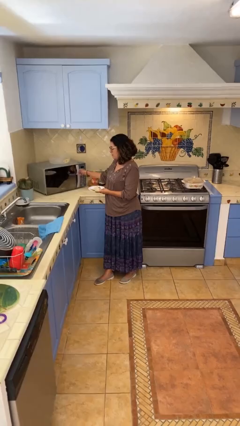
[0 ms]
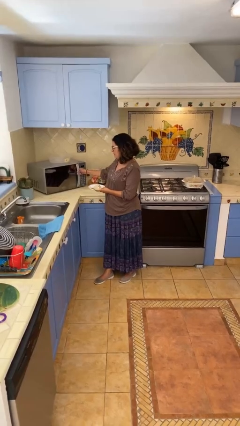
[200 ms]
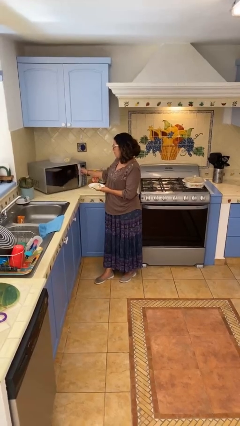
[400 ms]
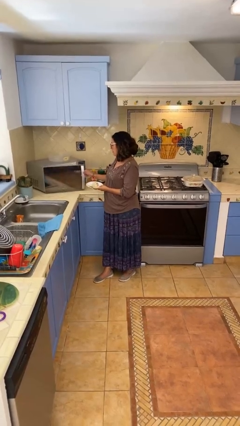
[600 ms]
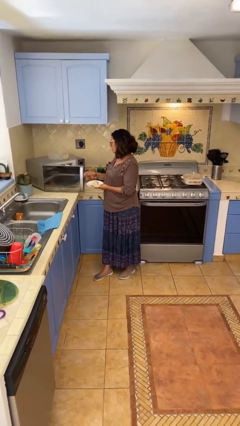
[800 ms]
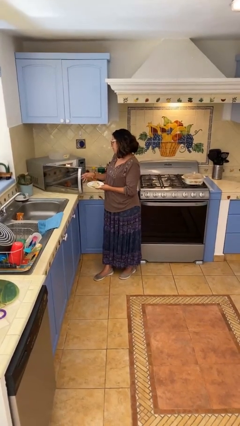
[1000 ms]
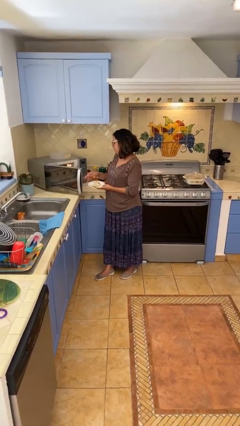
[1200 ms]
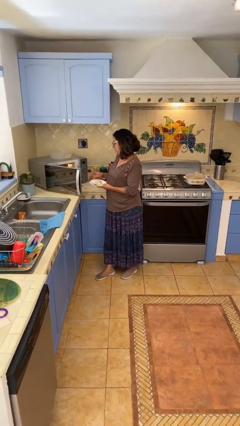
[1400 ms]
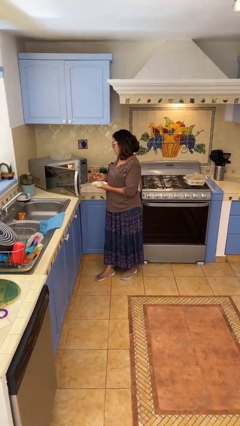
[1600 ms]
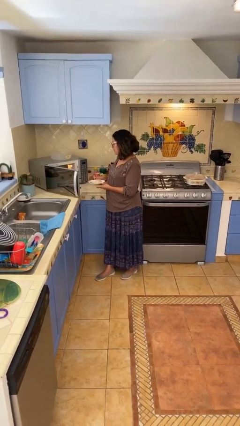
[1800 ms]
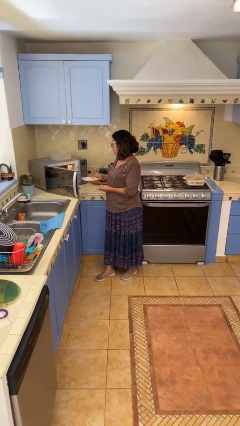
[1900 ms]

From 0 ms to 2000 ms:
person opens microwave

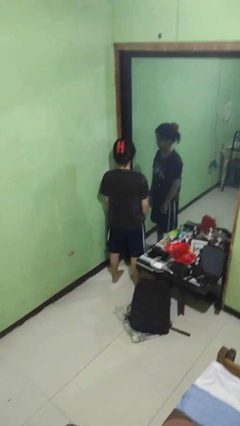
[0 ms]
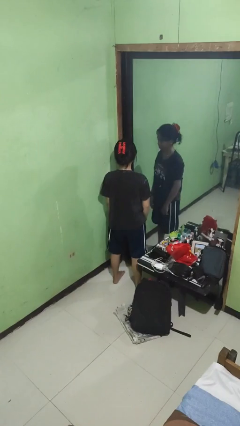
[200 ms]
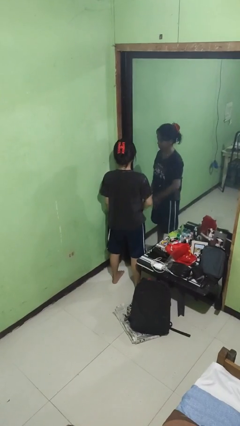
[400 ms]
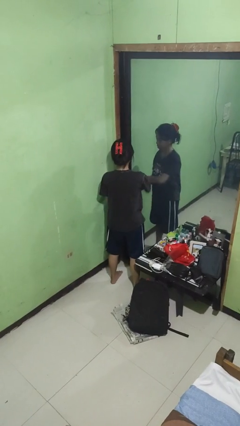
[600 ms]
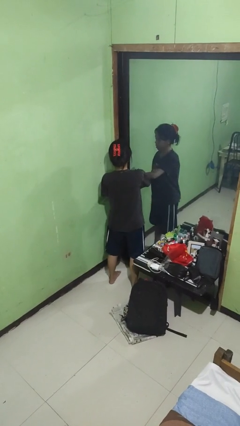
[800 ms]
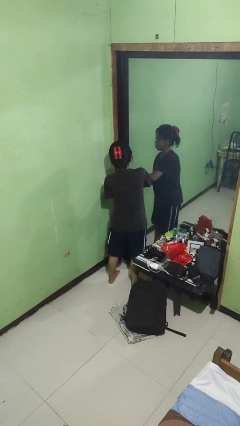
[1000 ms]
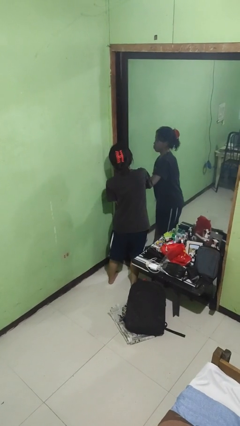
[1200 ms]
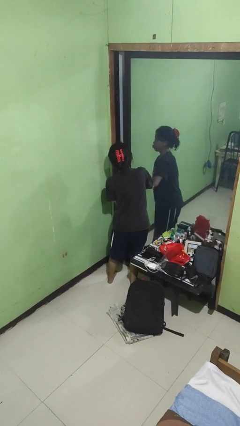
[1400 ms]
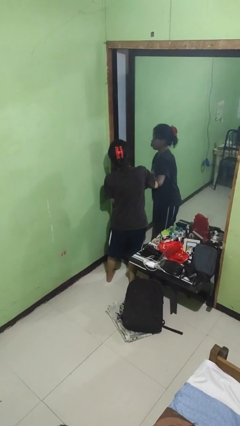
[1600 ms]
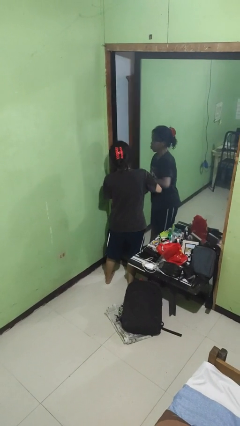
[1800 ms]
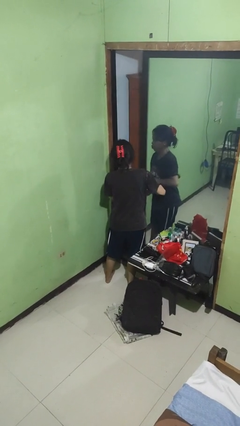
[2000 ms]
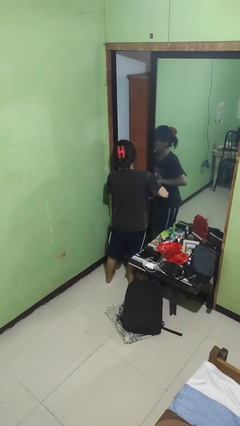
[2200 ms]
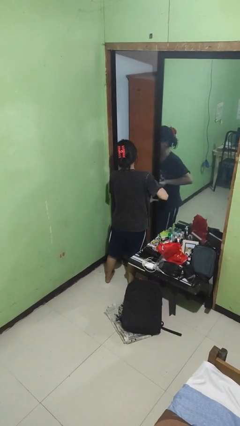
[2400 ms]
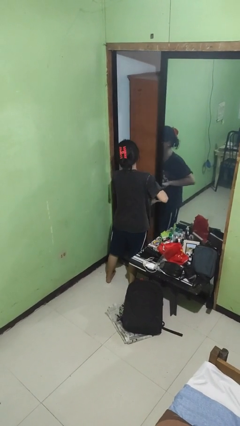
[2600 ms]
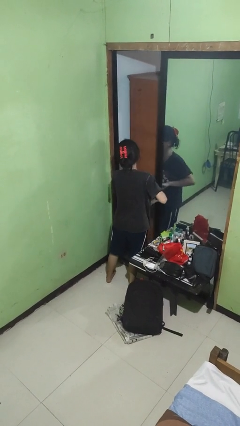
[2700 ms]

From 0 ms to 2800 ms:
person opens sliding door

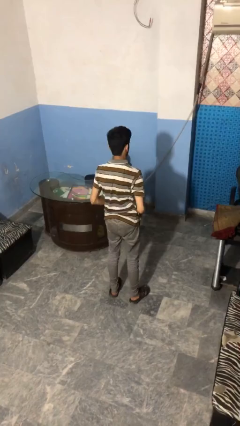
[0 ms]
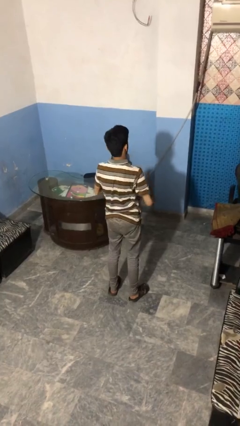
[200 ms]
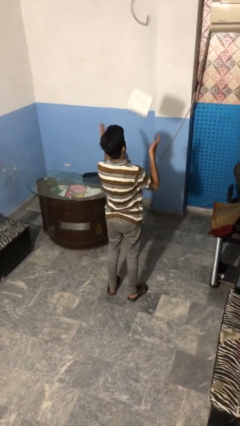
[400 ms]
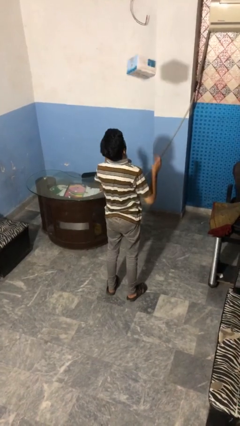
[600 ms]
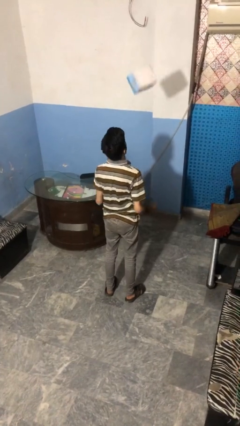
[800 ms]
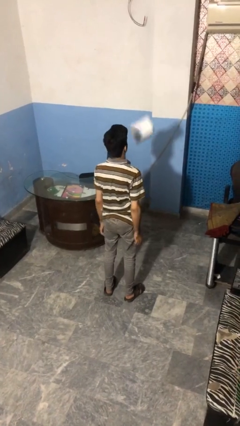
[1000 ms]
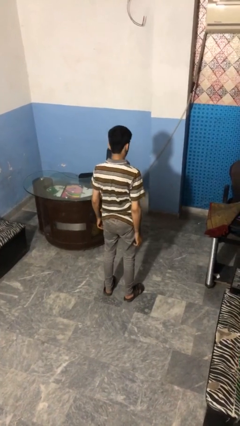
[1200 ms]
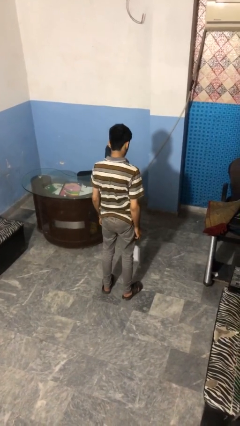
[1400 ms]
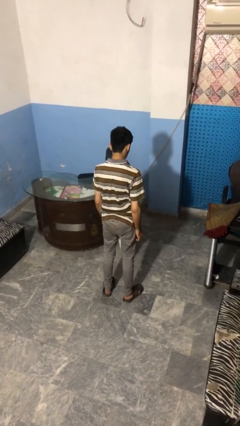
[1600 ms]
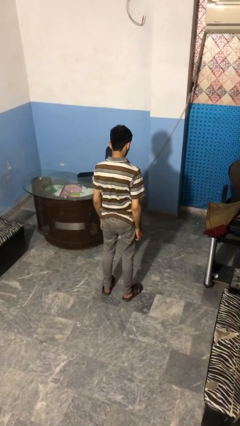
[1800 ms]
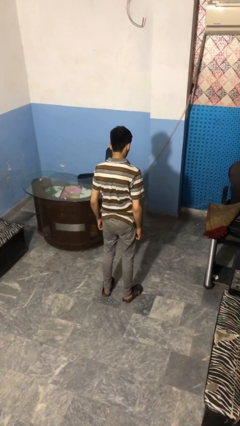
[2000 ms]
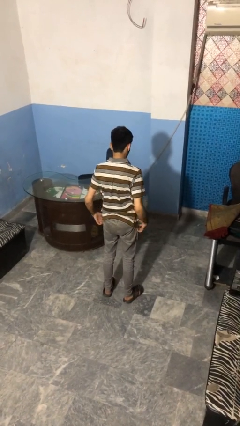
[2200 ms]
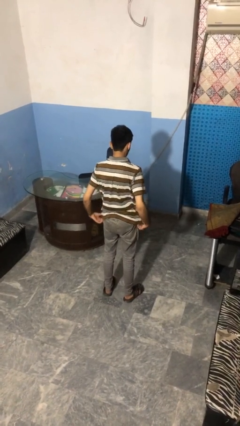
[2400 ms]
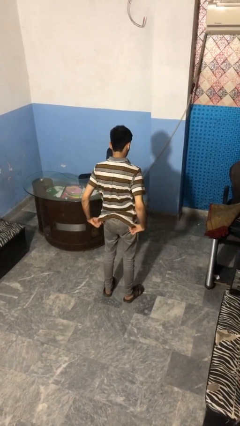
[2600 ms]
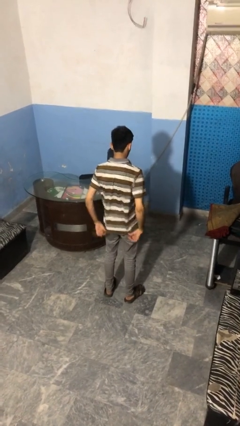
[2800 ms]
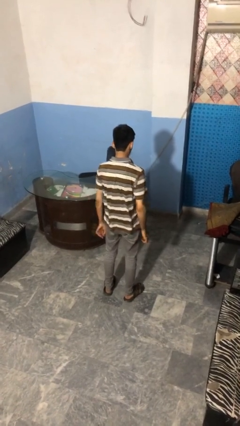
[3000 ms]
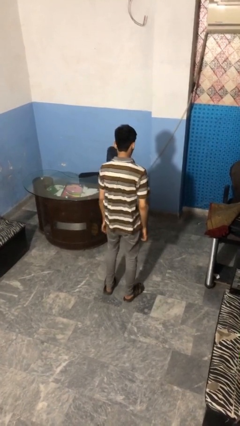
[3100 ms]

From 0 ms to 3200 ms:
person throws object into air

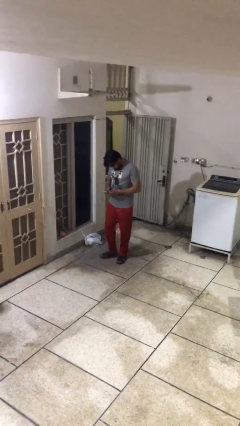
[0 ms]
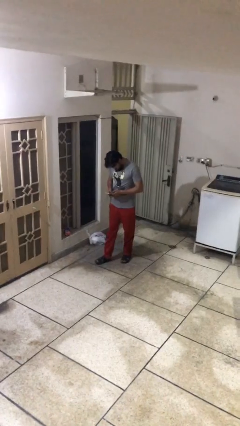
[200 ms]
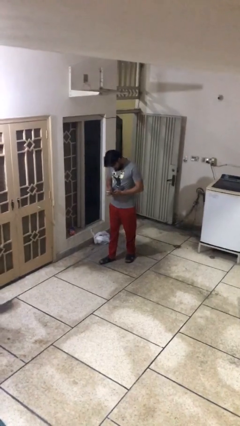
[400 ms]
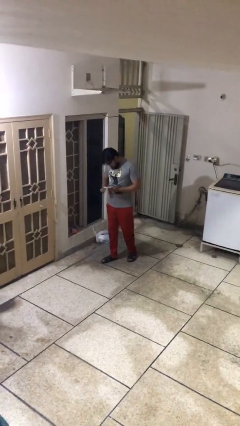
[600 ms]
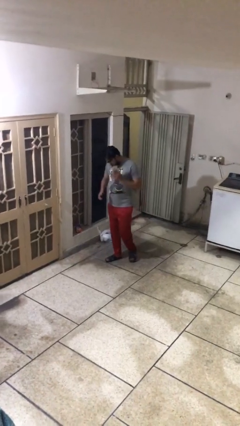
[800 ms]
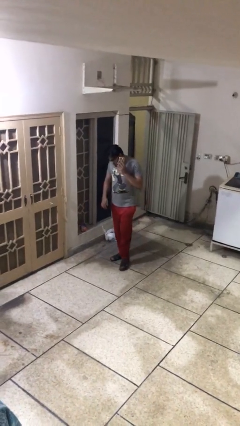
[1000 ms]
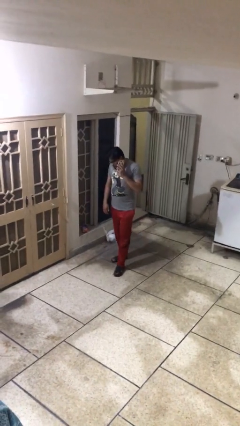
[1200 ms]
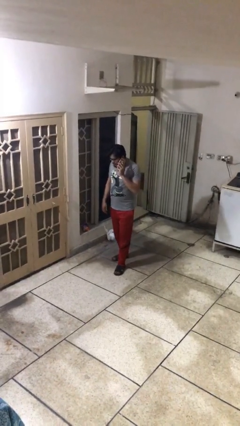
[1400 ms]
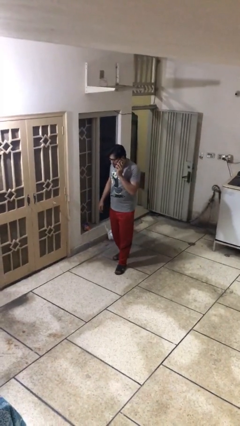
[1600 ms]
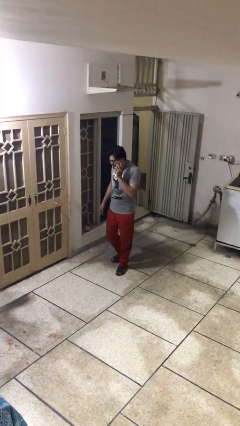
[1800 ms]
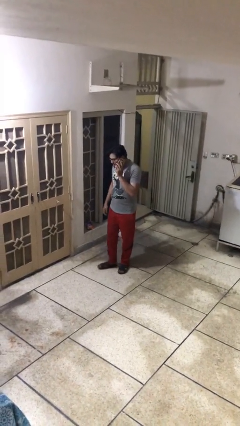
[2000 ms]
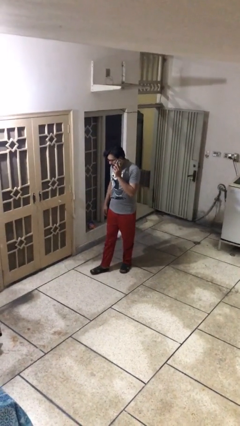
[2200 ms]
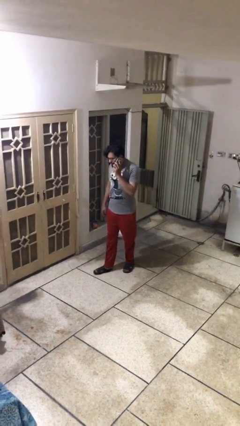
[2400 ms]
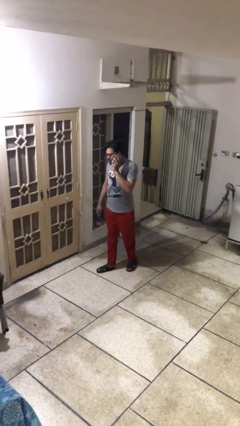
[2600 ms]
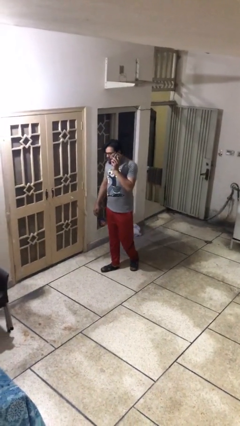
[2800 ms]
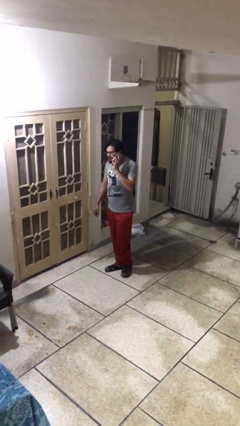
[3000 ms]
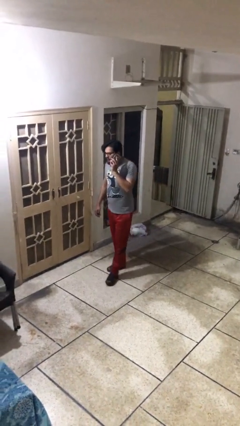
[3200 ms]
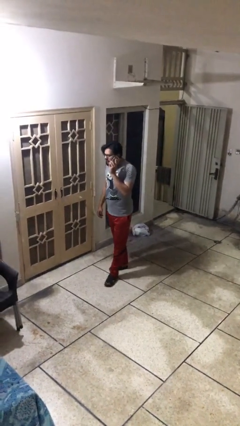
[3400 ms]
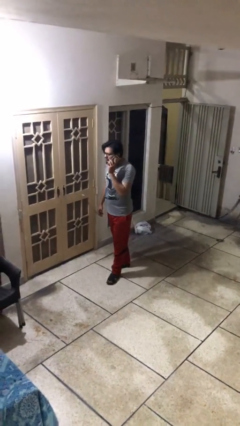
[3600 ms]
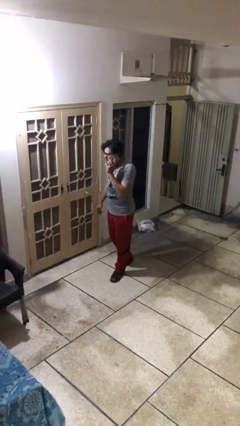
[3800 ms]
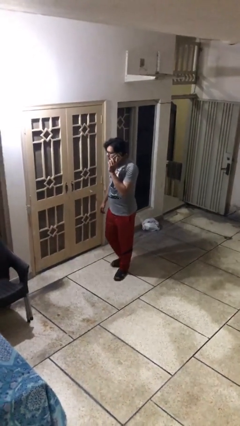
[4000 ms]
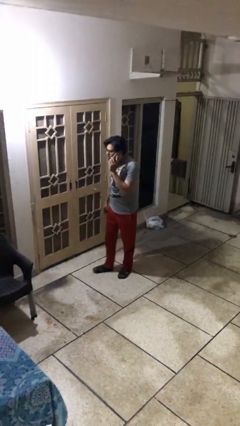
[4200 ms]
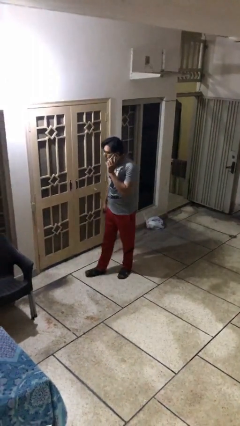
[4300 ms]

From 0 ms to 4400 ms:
person talks on phone

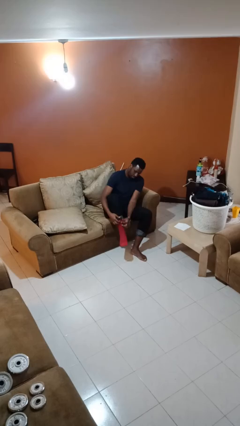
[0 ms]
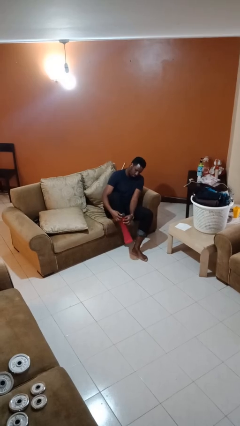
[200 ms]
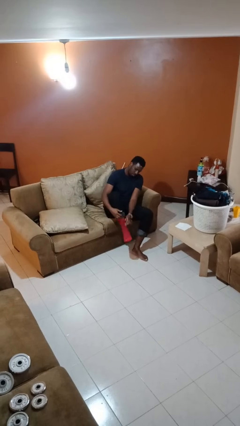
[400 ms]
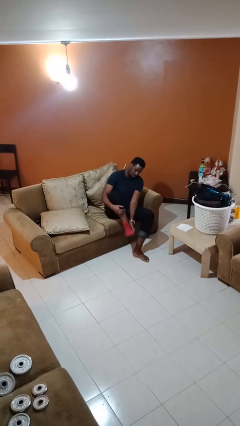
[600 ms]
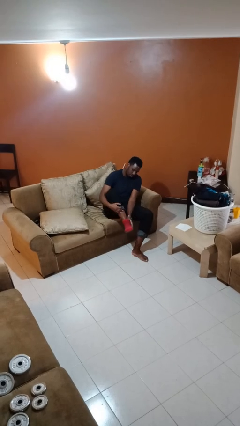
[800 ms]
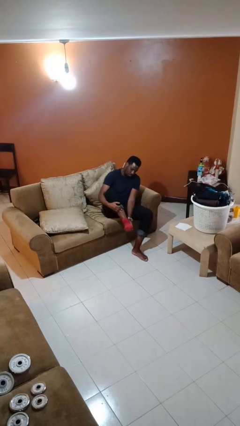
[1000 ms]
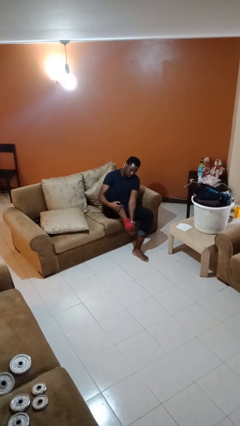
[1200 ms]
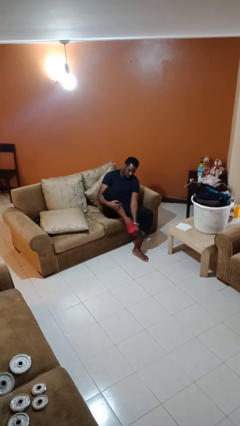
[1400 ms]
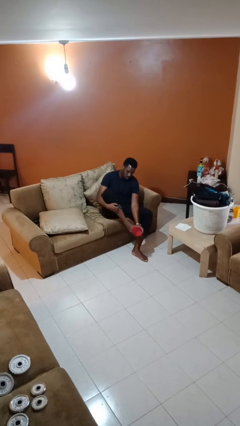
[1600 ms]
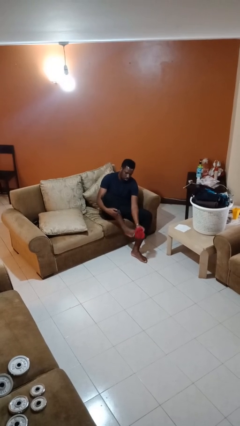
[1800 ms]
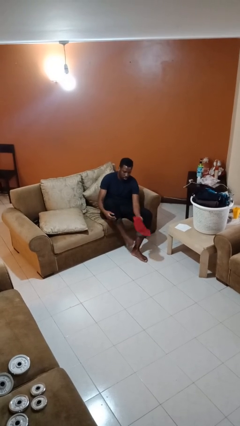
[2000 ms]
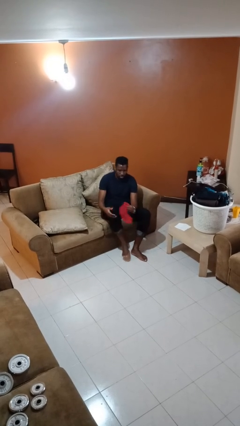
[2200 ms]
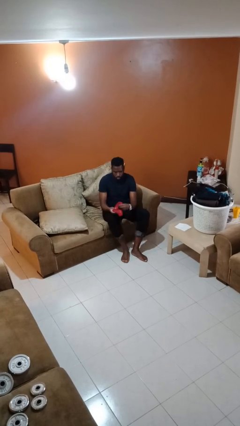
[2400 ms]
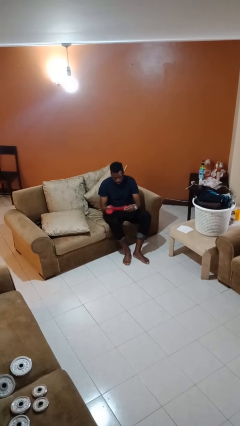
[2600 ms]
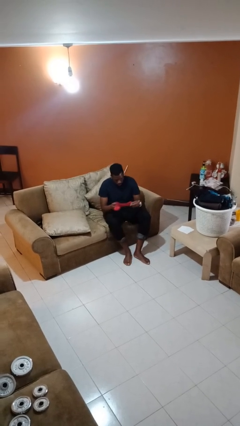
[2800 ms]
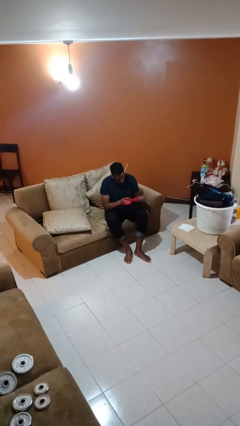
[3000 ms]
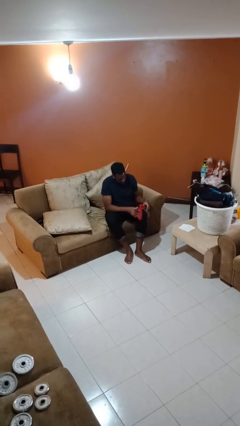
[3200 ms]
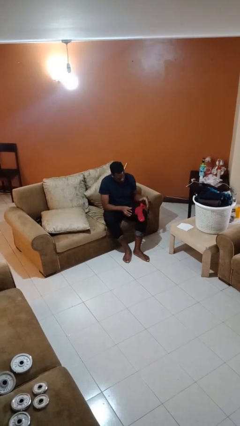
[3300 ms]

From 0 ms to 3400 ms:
person takes off socks

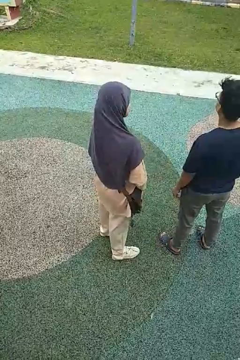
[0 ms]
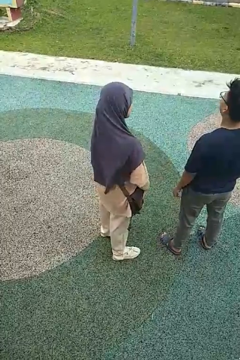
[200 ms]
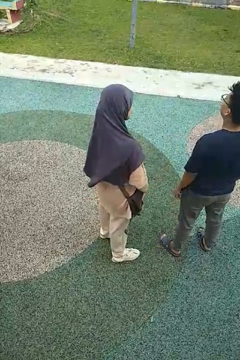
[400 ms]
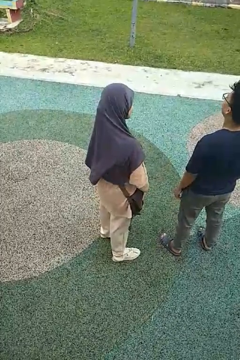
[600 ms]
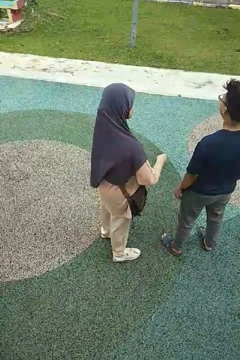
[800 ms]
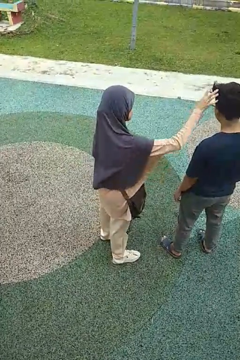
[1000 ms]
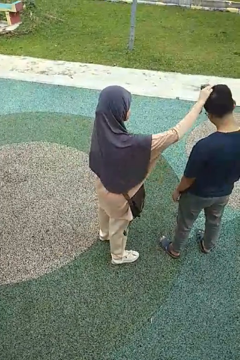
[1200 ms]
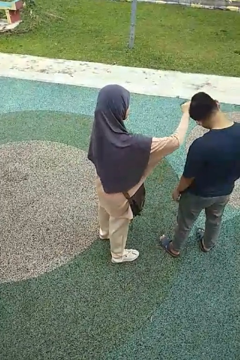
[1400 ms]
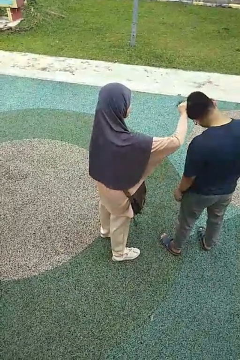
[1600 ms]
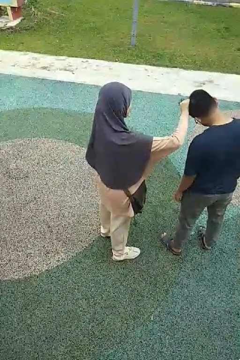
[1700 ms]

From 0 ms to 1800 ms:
person grabs person by hair

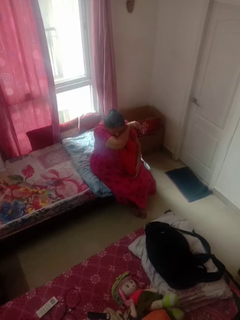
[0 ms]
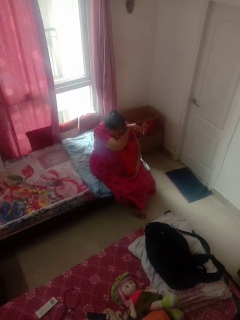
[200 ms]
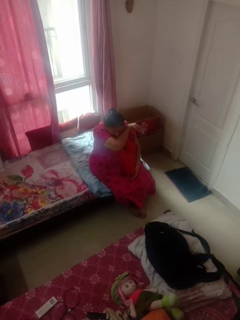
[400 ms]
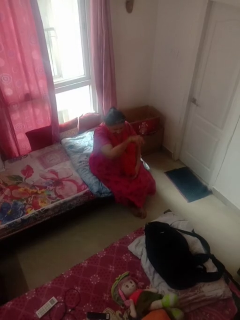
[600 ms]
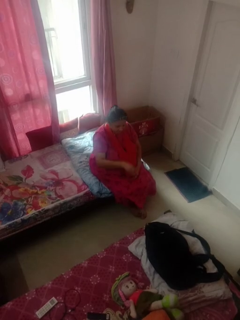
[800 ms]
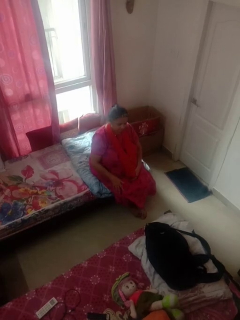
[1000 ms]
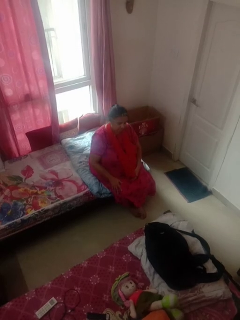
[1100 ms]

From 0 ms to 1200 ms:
person sneezes into arm
